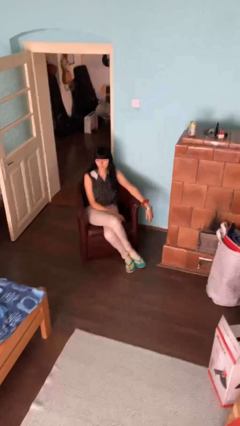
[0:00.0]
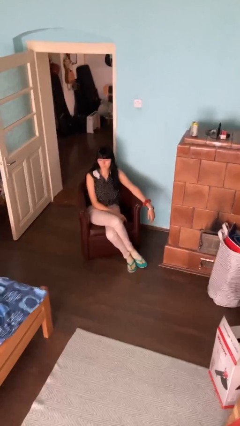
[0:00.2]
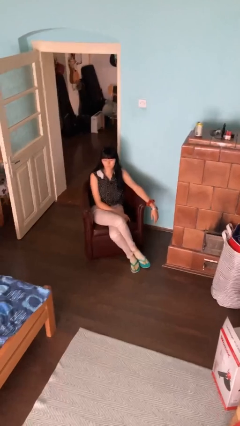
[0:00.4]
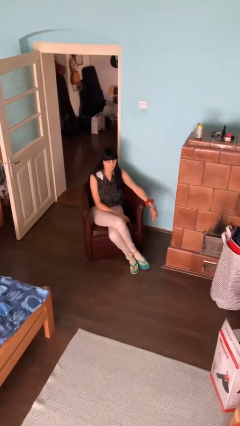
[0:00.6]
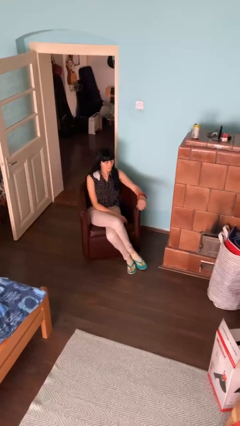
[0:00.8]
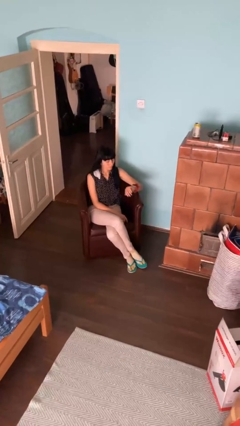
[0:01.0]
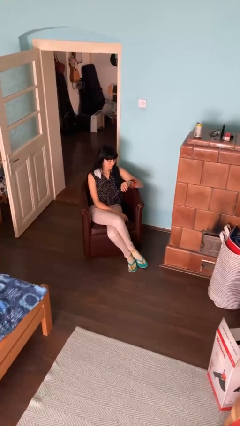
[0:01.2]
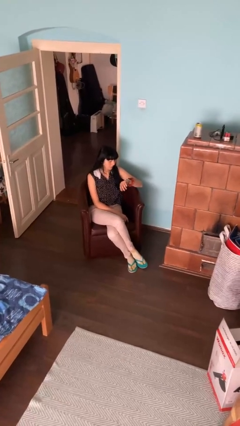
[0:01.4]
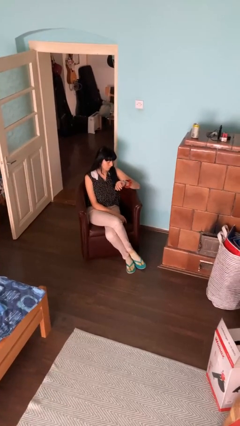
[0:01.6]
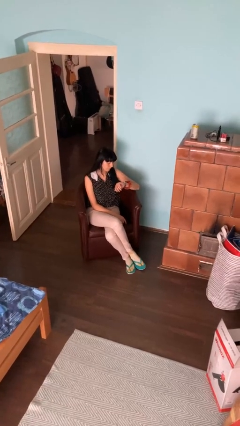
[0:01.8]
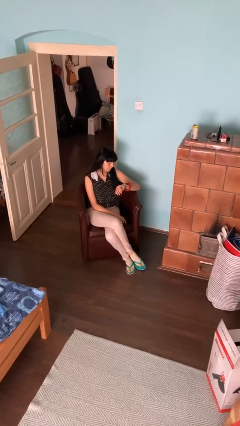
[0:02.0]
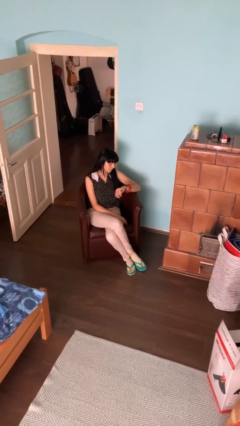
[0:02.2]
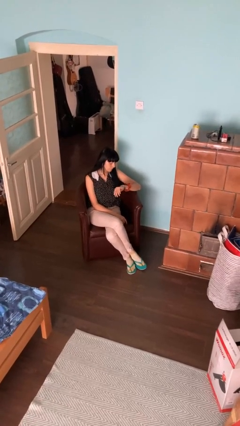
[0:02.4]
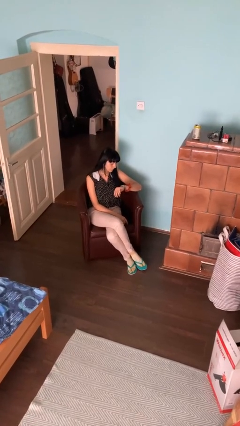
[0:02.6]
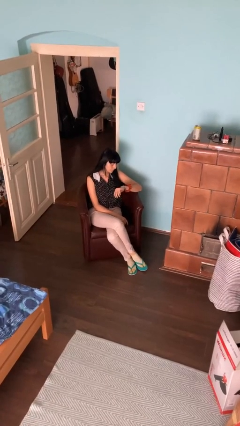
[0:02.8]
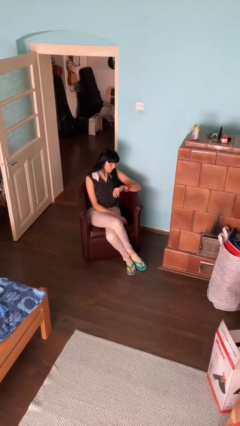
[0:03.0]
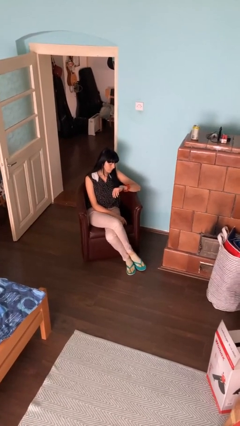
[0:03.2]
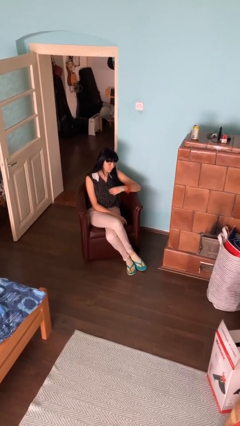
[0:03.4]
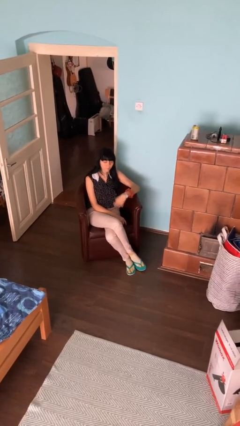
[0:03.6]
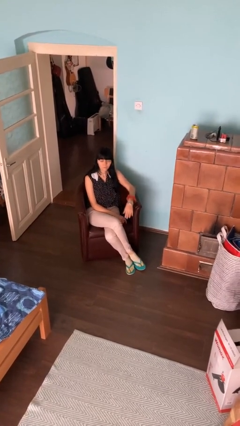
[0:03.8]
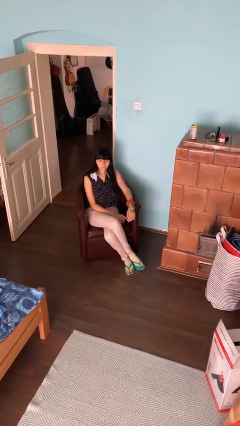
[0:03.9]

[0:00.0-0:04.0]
person looks at wristwatch

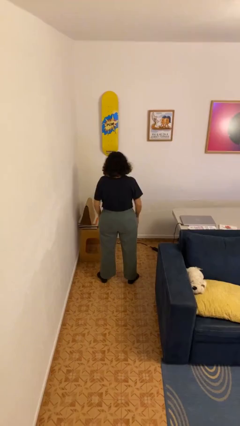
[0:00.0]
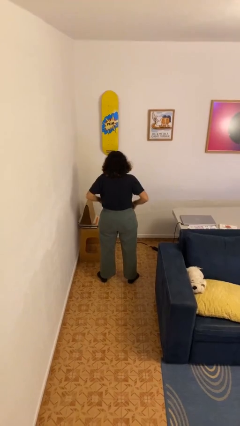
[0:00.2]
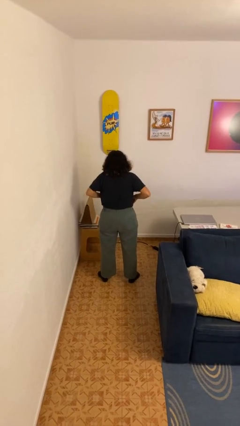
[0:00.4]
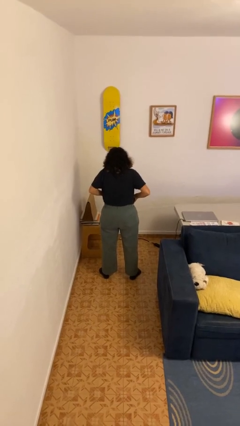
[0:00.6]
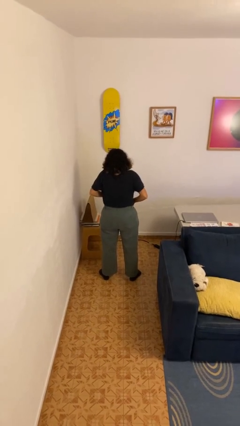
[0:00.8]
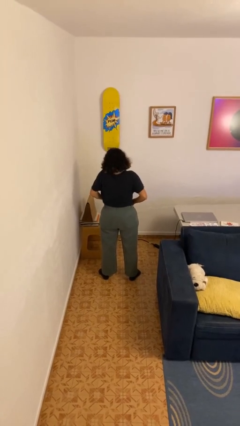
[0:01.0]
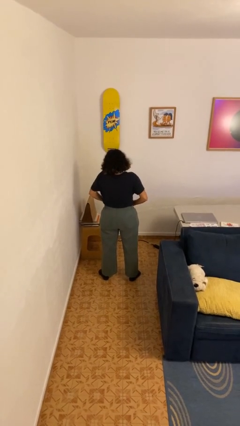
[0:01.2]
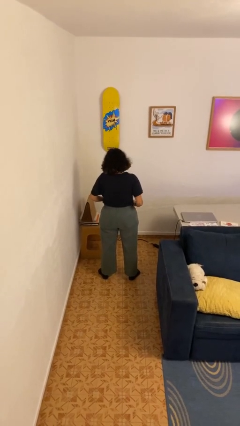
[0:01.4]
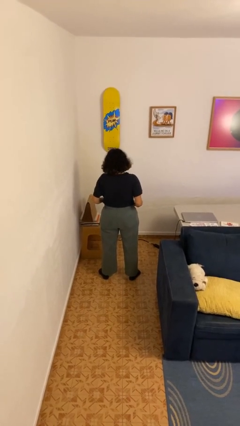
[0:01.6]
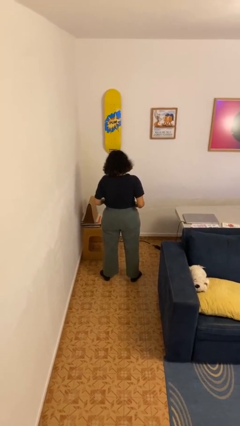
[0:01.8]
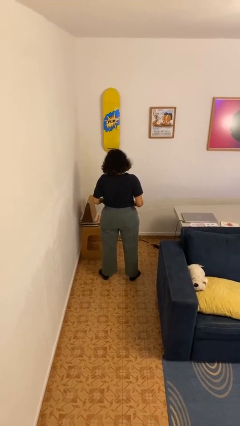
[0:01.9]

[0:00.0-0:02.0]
person puts hands in back pockets

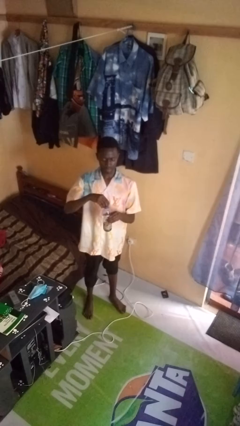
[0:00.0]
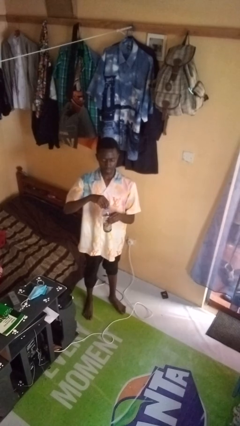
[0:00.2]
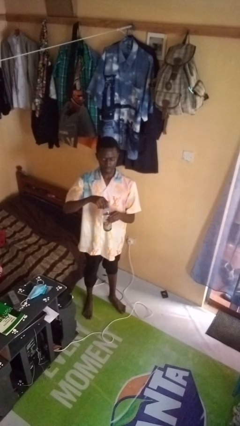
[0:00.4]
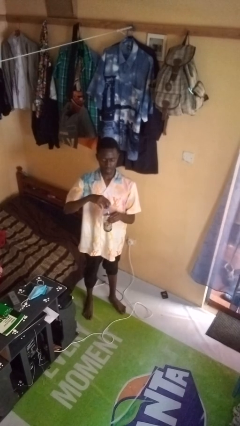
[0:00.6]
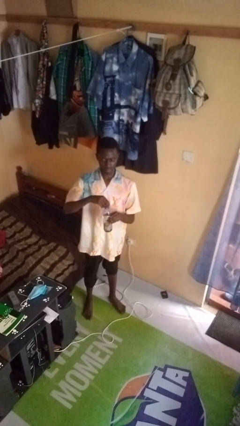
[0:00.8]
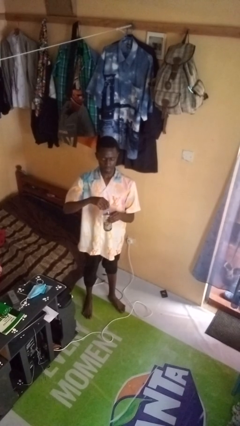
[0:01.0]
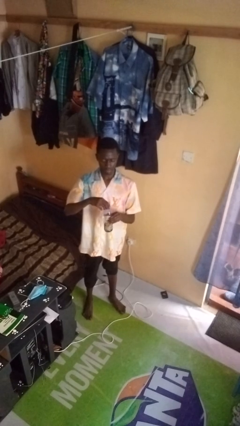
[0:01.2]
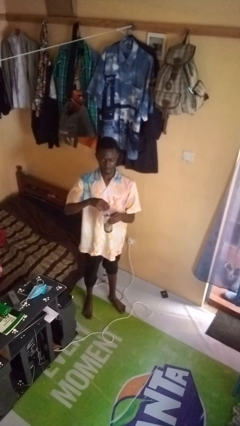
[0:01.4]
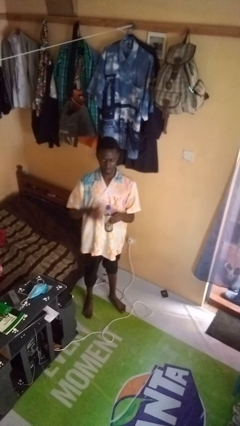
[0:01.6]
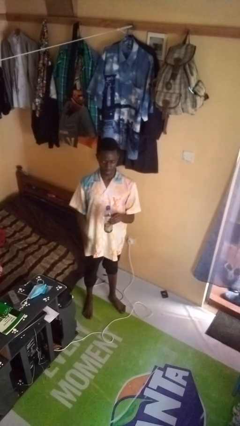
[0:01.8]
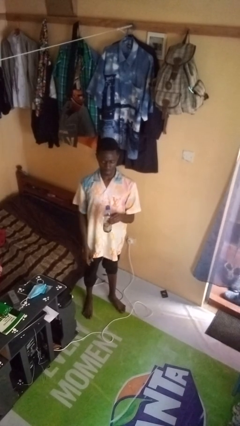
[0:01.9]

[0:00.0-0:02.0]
person screws lid to bottle

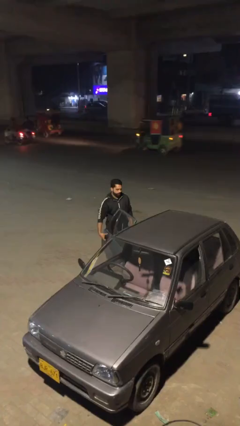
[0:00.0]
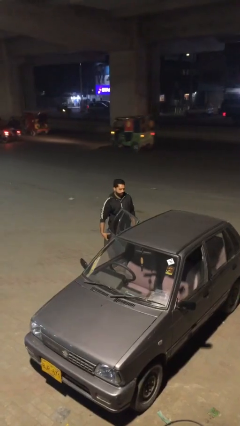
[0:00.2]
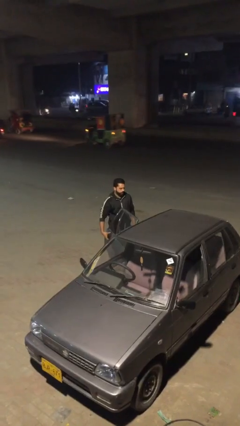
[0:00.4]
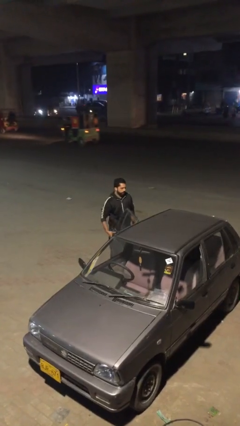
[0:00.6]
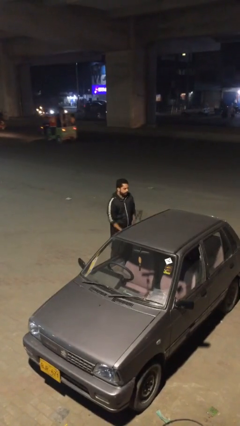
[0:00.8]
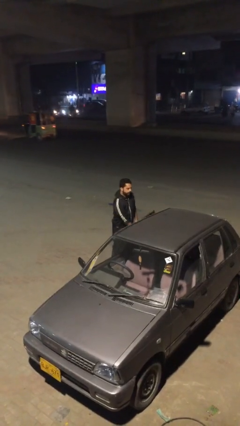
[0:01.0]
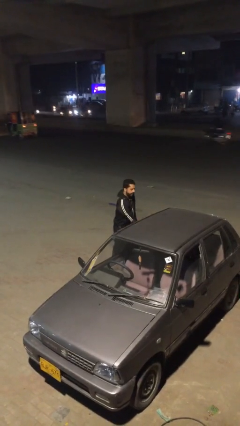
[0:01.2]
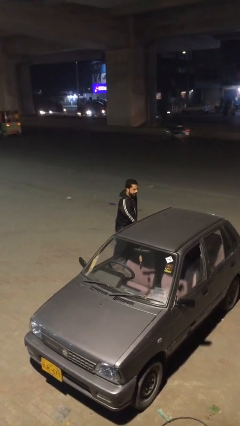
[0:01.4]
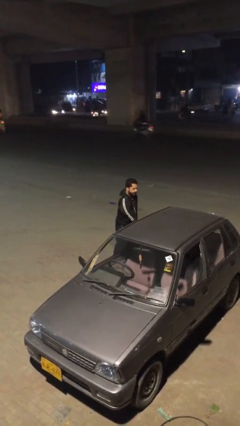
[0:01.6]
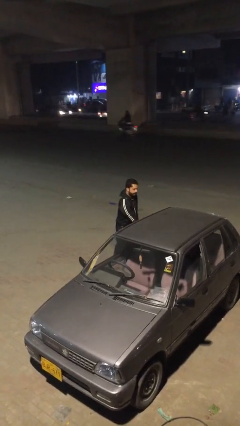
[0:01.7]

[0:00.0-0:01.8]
person closes car door

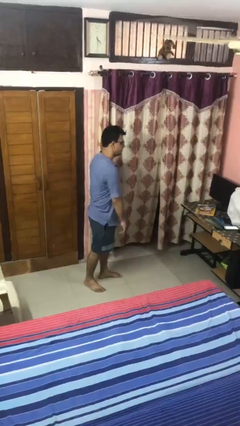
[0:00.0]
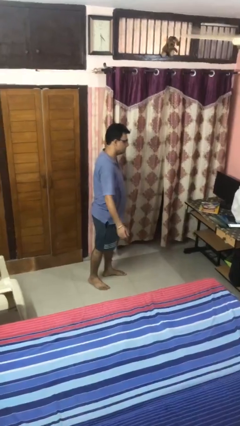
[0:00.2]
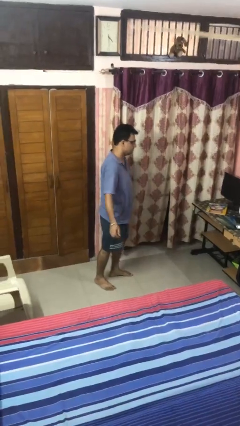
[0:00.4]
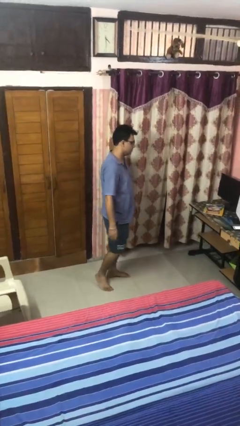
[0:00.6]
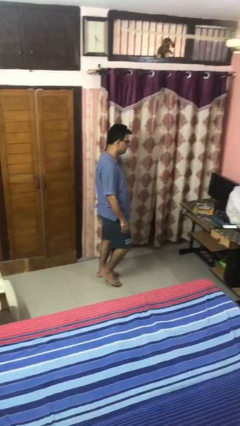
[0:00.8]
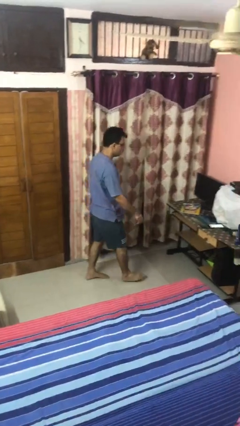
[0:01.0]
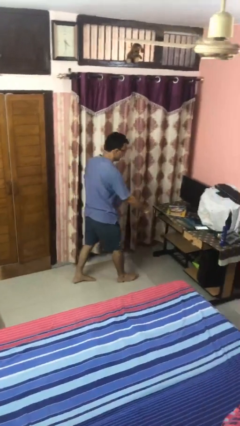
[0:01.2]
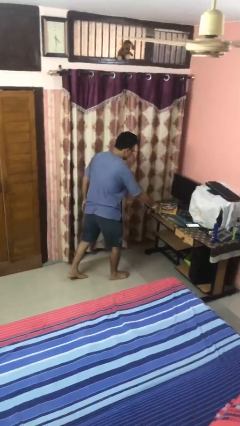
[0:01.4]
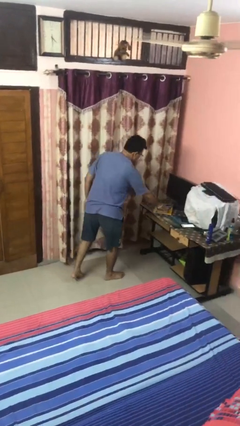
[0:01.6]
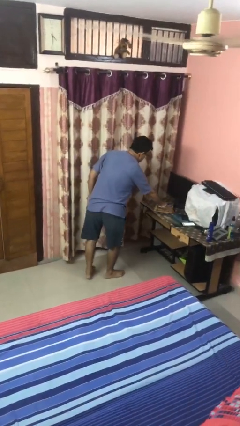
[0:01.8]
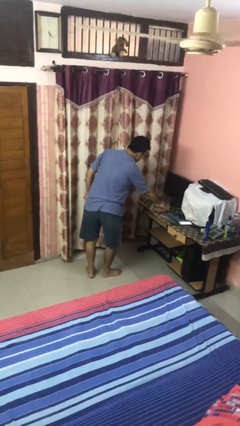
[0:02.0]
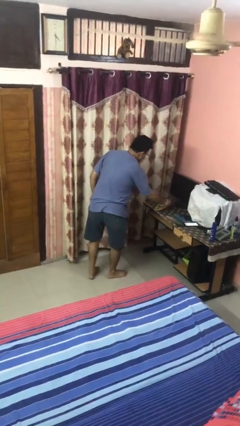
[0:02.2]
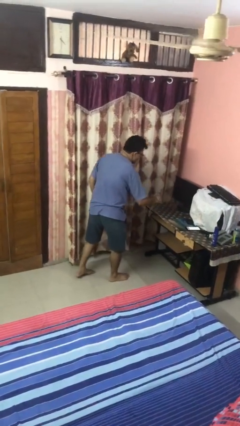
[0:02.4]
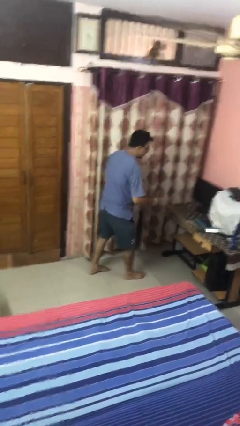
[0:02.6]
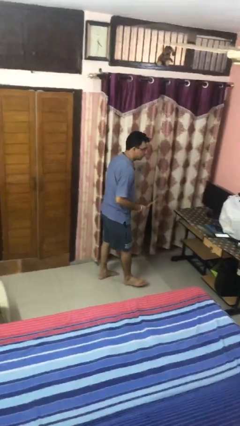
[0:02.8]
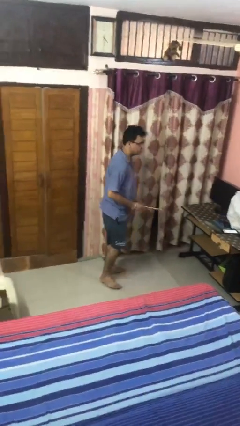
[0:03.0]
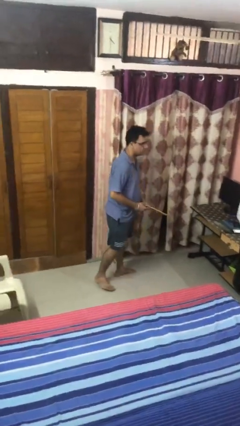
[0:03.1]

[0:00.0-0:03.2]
person picks up object from table

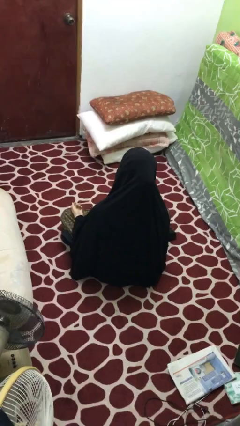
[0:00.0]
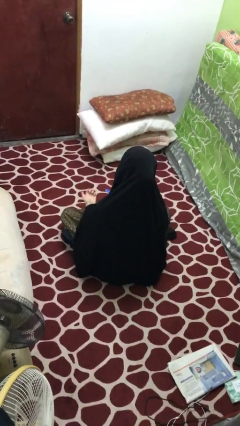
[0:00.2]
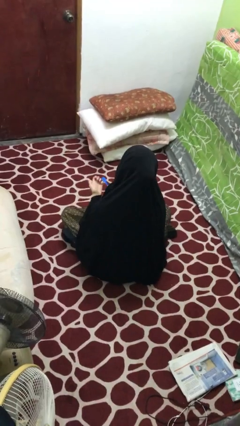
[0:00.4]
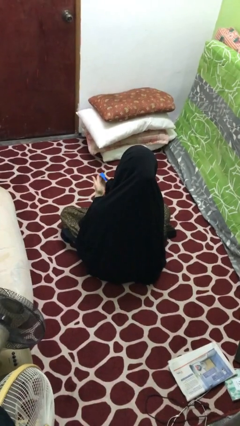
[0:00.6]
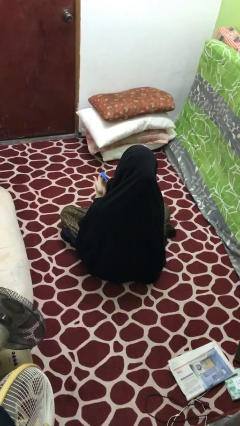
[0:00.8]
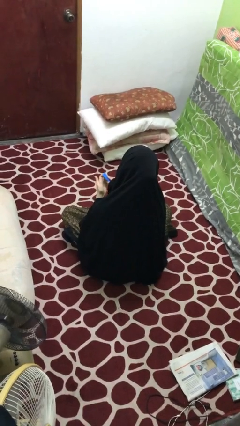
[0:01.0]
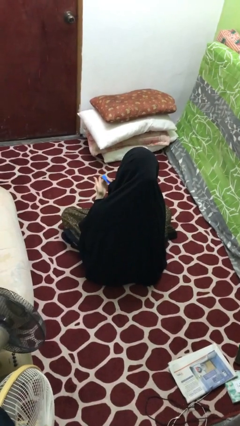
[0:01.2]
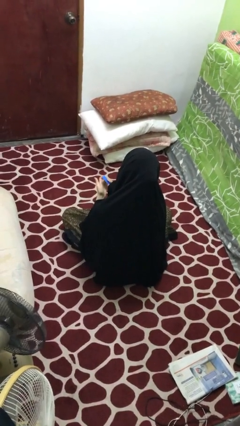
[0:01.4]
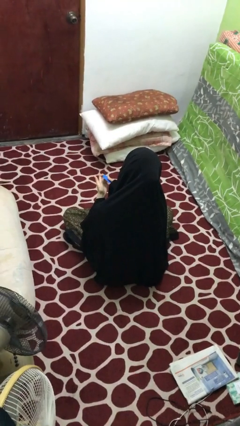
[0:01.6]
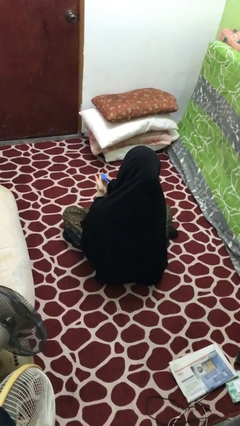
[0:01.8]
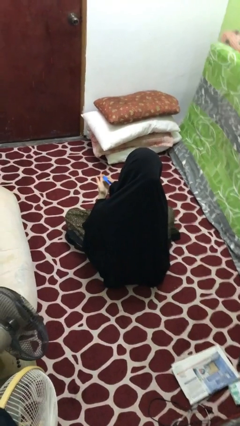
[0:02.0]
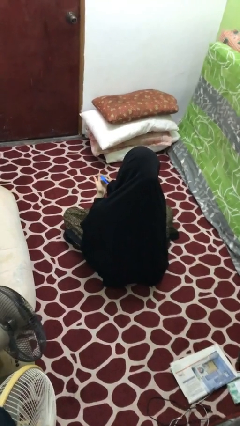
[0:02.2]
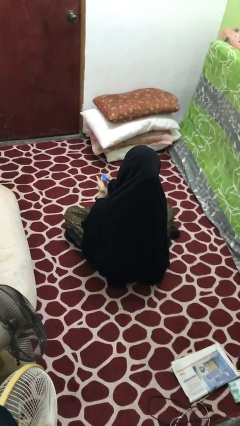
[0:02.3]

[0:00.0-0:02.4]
person files fingernails

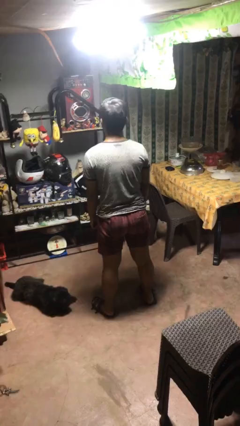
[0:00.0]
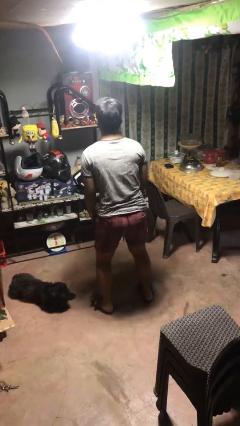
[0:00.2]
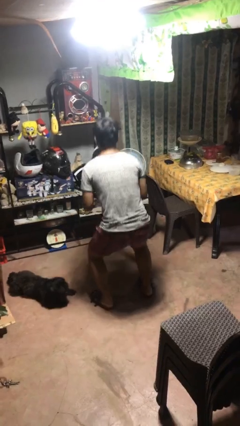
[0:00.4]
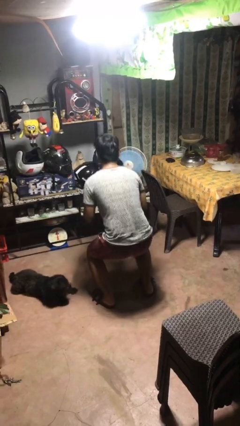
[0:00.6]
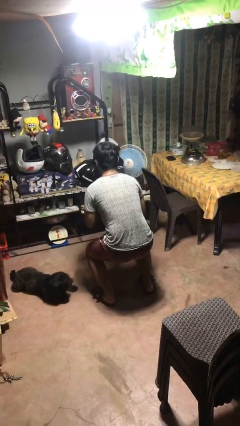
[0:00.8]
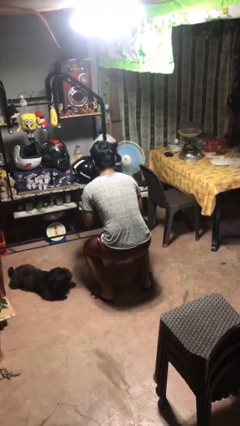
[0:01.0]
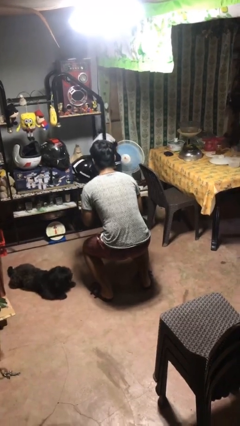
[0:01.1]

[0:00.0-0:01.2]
person squats

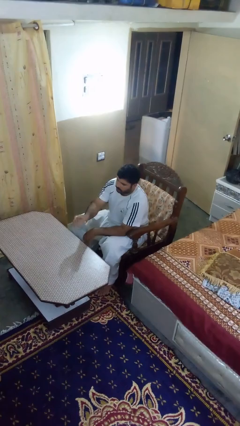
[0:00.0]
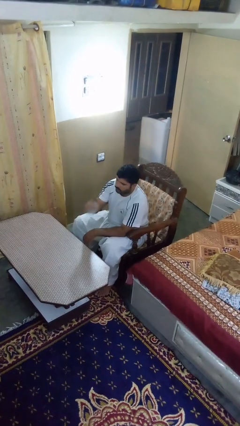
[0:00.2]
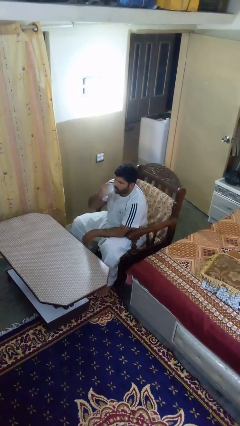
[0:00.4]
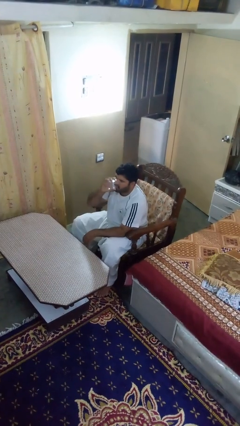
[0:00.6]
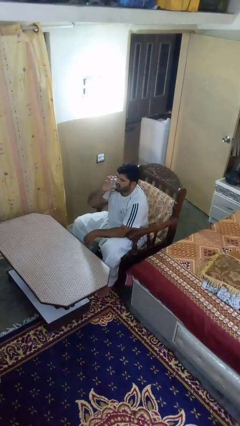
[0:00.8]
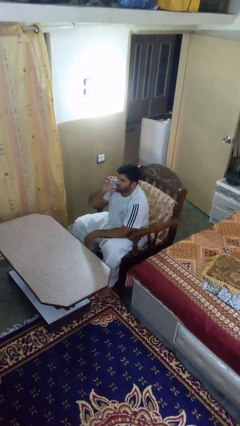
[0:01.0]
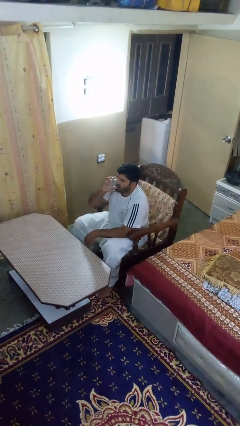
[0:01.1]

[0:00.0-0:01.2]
person drinks from shotglass
